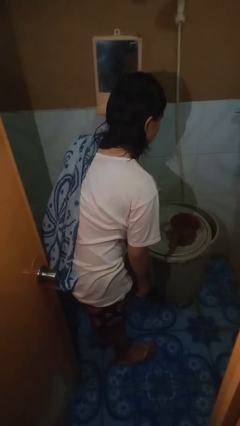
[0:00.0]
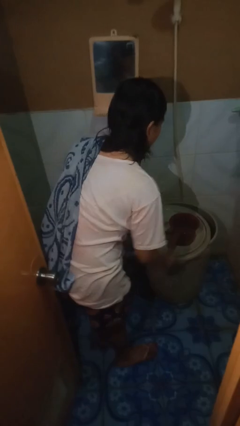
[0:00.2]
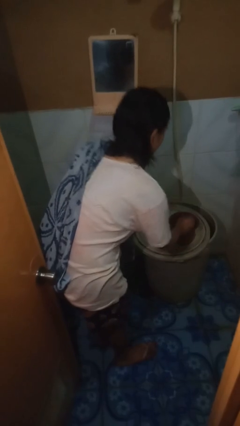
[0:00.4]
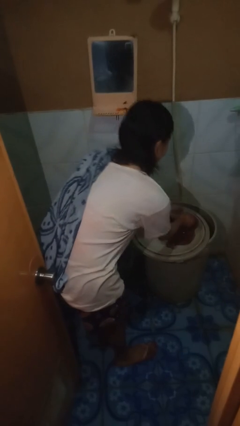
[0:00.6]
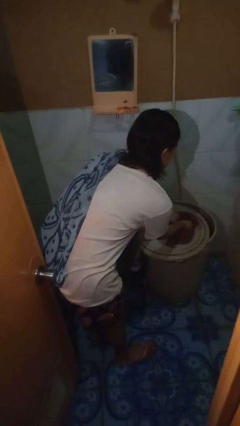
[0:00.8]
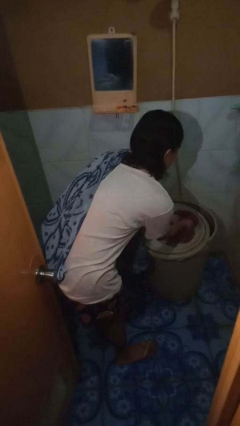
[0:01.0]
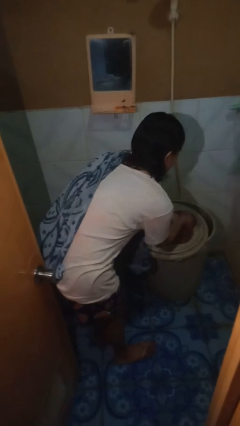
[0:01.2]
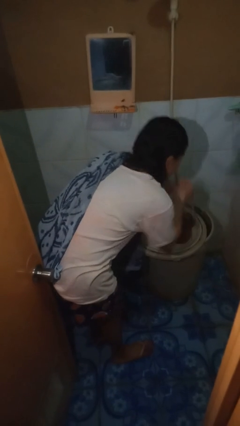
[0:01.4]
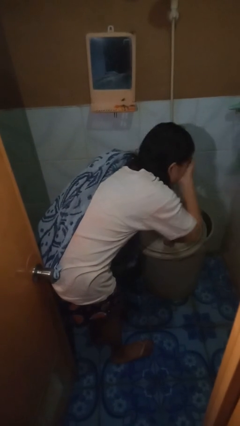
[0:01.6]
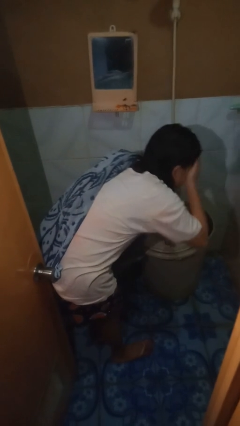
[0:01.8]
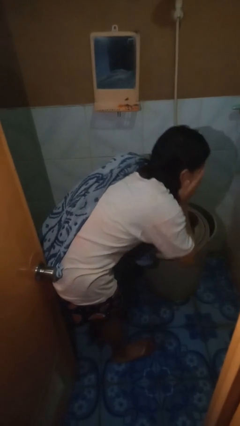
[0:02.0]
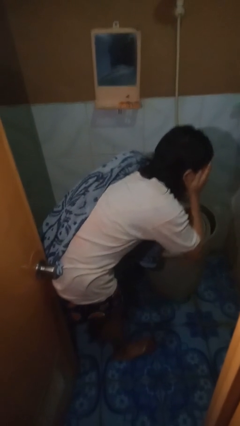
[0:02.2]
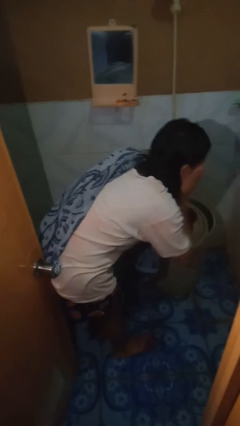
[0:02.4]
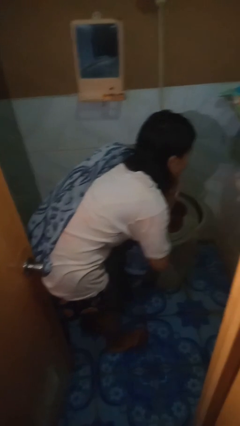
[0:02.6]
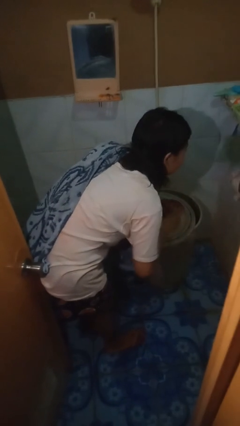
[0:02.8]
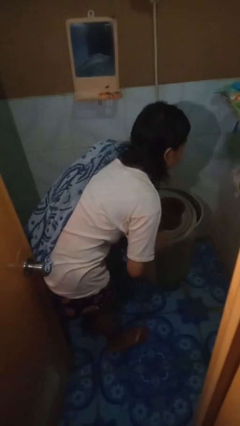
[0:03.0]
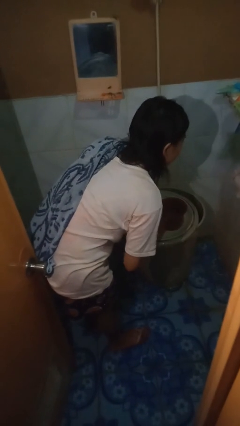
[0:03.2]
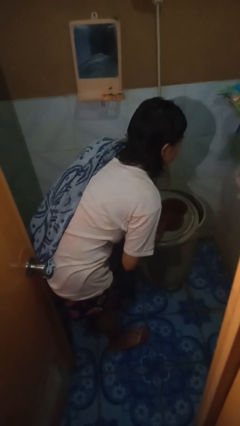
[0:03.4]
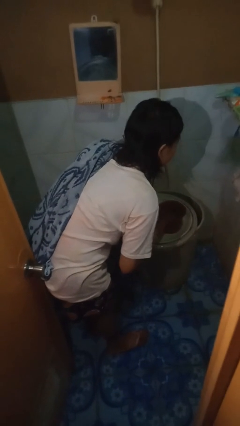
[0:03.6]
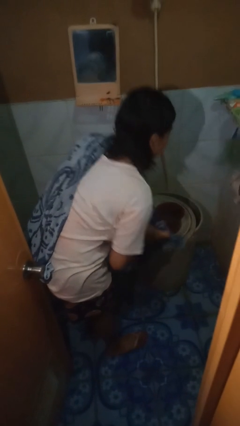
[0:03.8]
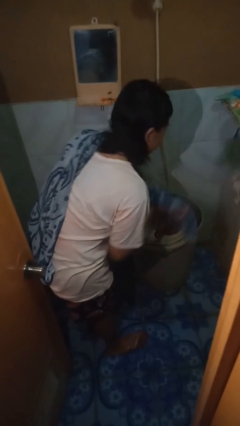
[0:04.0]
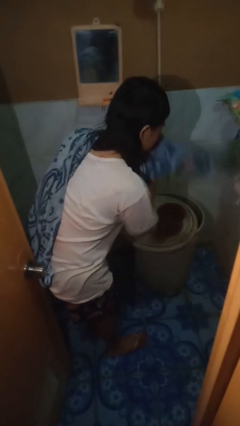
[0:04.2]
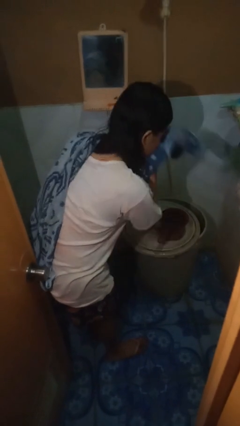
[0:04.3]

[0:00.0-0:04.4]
person washes face

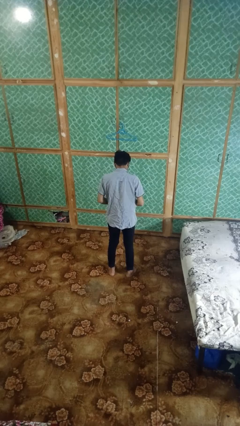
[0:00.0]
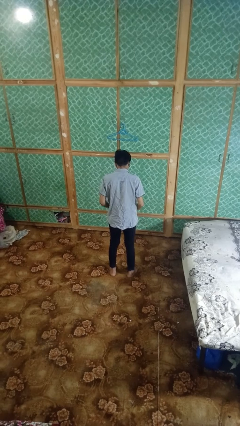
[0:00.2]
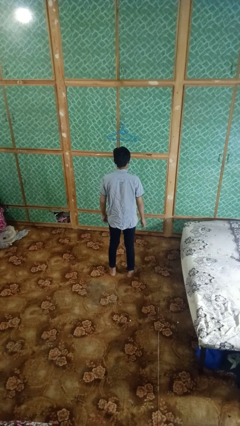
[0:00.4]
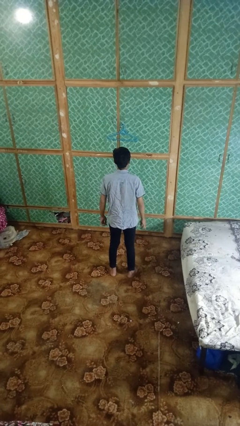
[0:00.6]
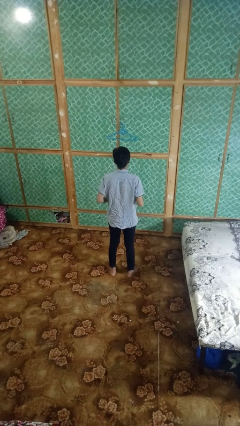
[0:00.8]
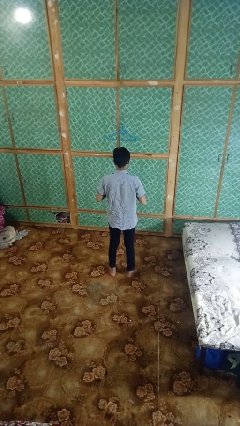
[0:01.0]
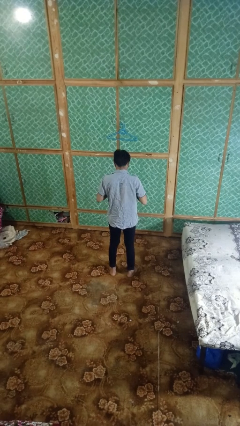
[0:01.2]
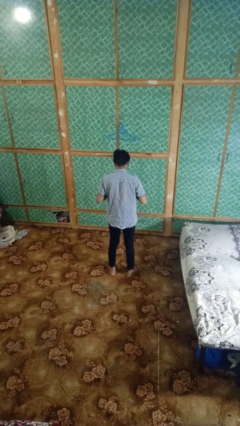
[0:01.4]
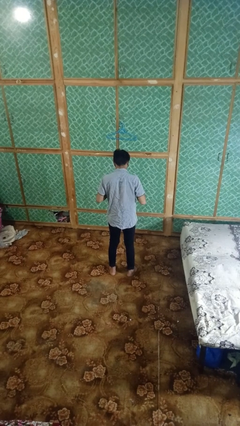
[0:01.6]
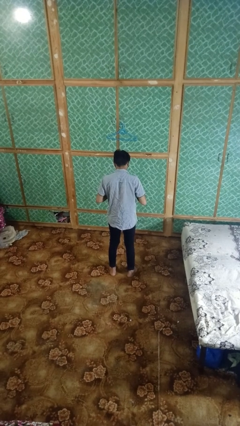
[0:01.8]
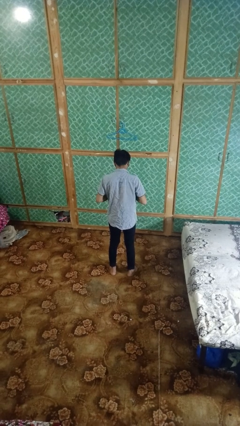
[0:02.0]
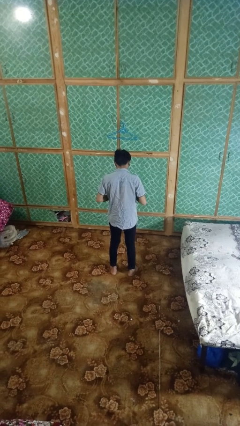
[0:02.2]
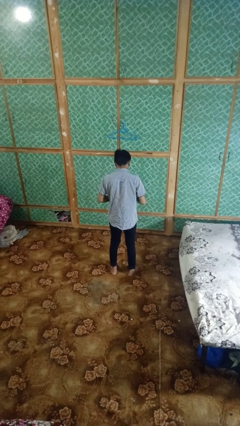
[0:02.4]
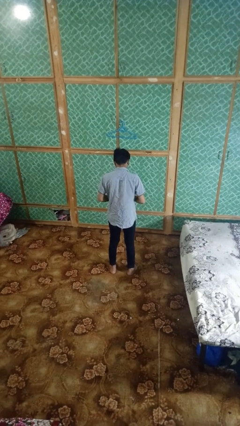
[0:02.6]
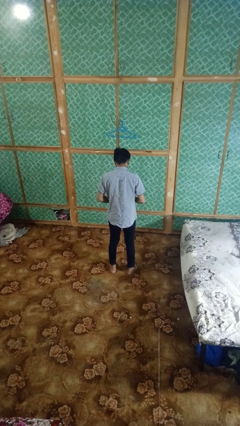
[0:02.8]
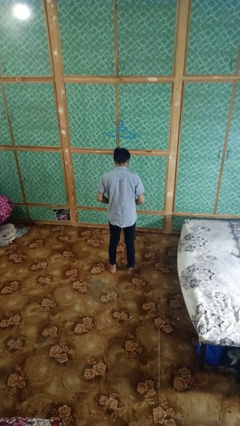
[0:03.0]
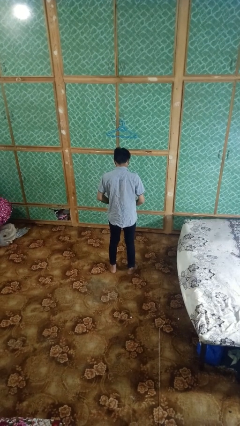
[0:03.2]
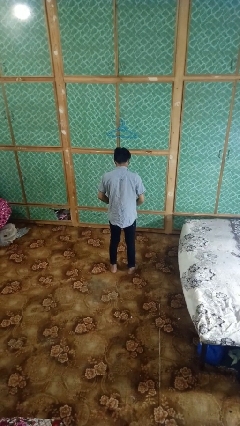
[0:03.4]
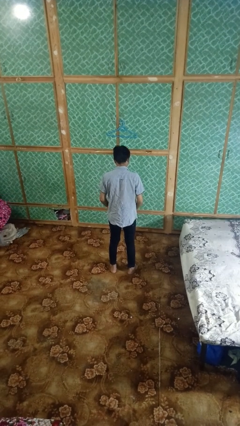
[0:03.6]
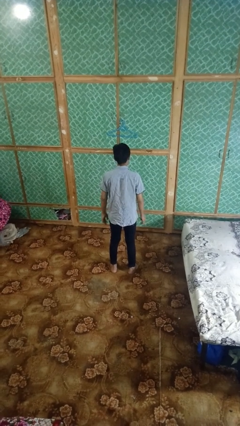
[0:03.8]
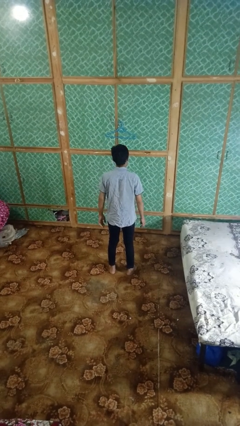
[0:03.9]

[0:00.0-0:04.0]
person buttons shirt

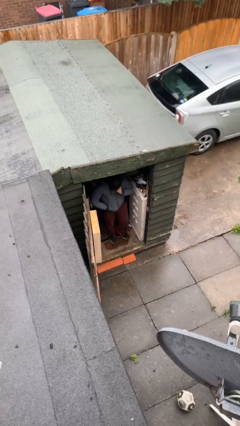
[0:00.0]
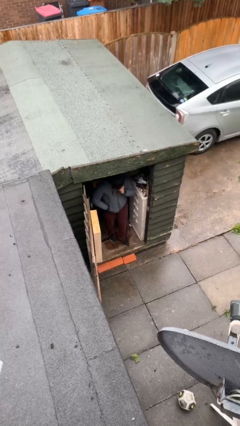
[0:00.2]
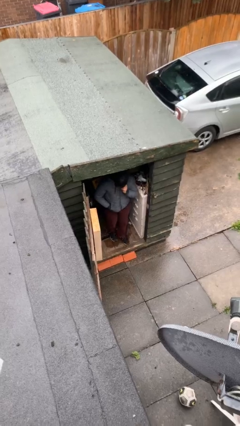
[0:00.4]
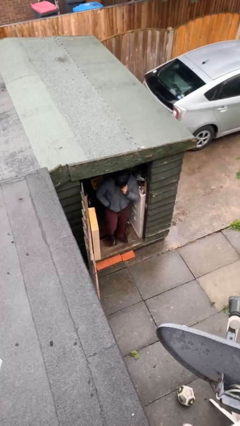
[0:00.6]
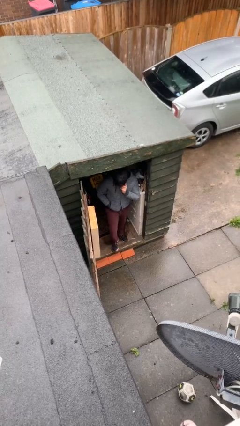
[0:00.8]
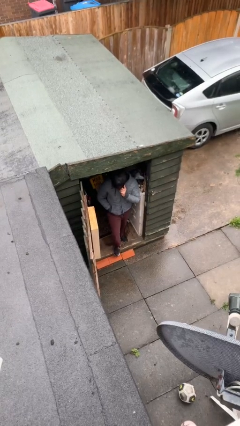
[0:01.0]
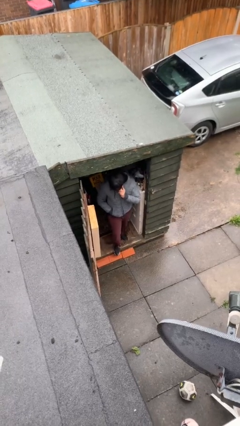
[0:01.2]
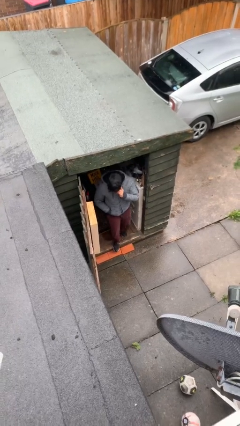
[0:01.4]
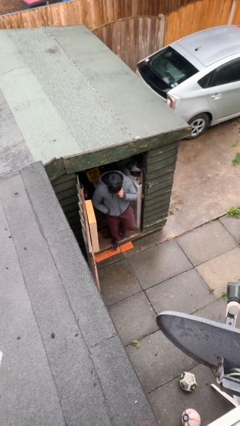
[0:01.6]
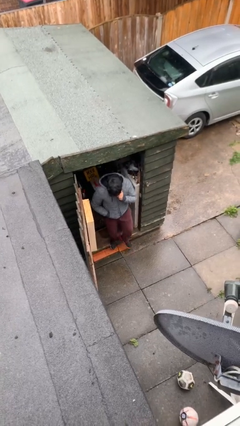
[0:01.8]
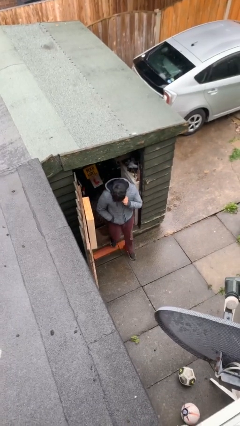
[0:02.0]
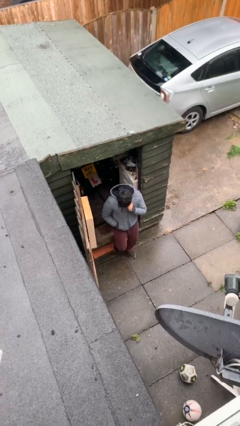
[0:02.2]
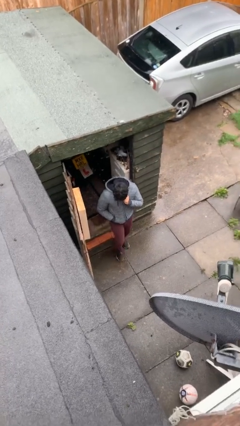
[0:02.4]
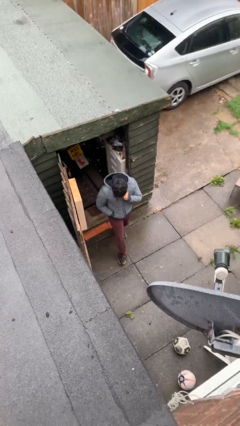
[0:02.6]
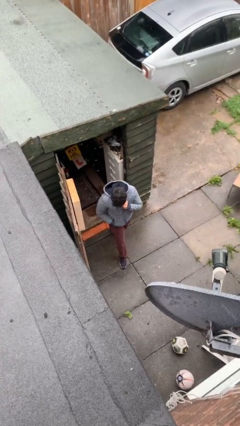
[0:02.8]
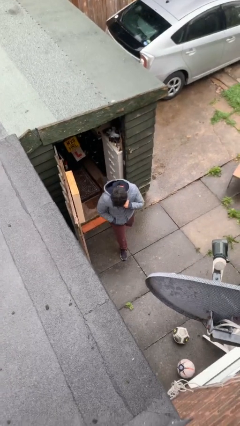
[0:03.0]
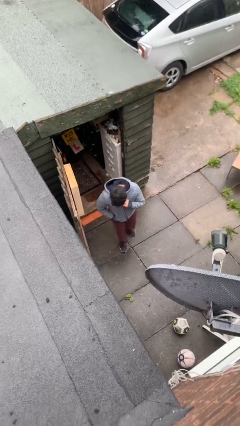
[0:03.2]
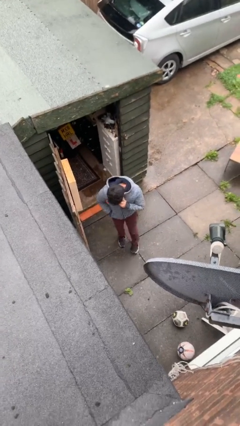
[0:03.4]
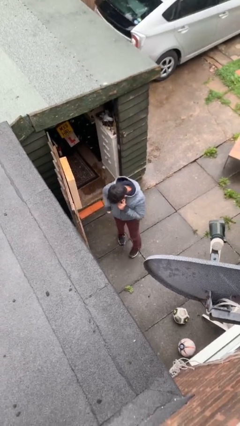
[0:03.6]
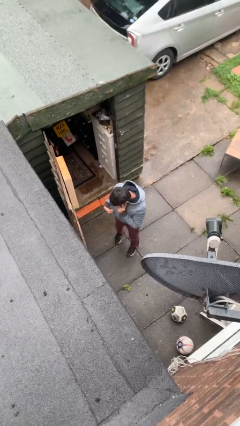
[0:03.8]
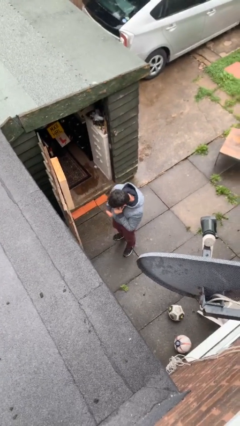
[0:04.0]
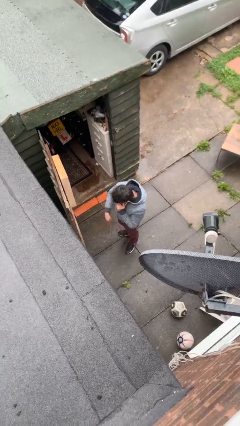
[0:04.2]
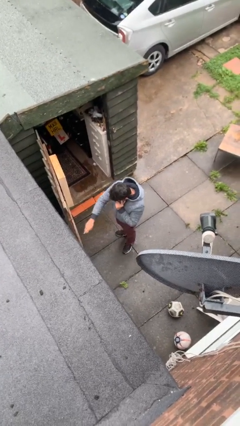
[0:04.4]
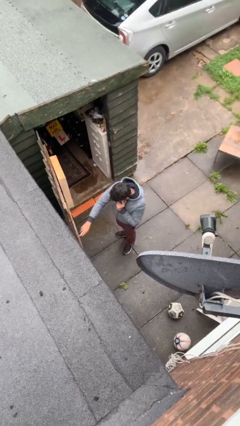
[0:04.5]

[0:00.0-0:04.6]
person enters scene through structure

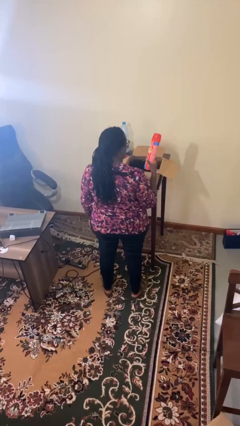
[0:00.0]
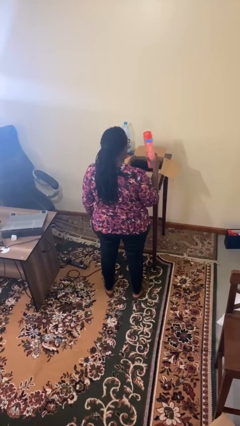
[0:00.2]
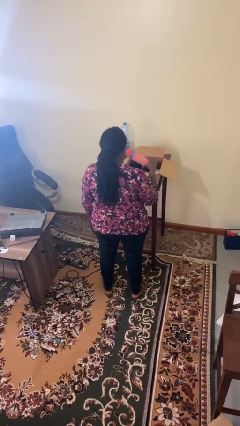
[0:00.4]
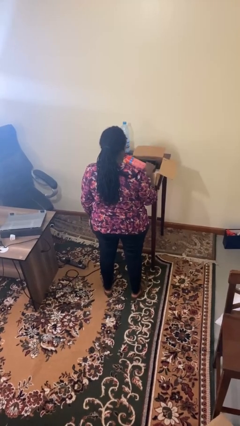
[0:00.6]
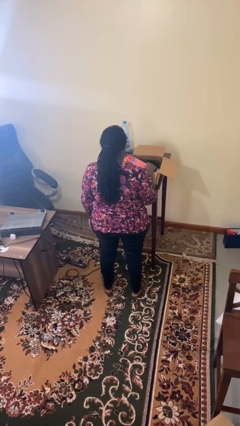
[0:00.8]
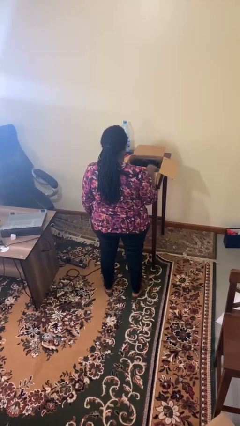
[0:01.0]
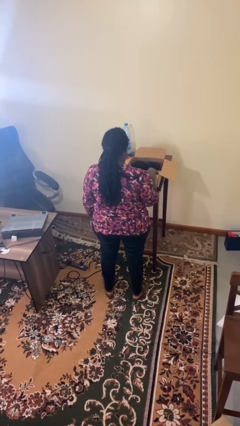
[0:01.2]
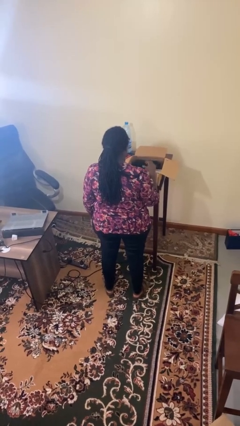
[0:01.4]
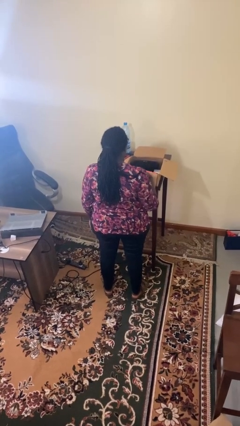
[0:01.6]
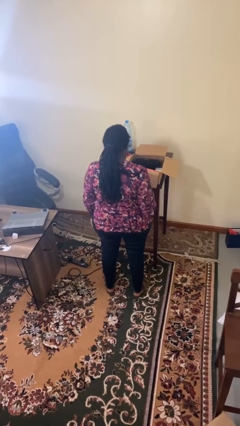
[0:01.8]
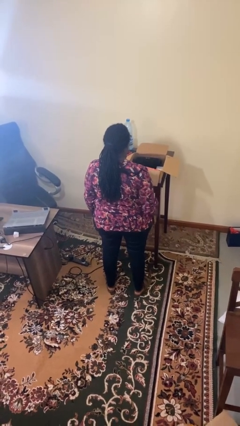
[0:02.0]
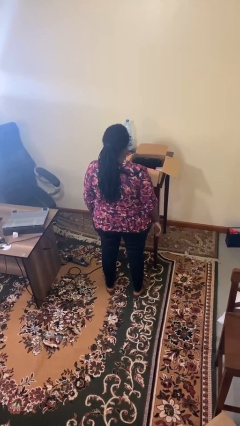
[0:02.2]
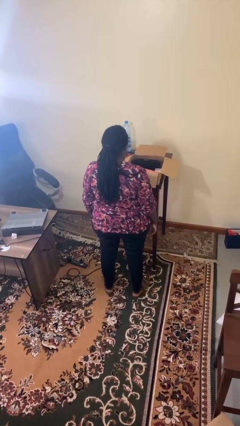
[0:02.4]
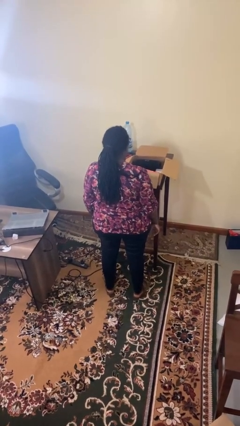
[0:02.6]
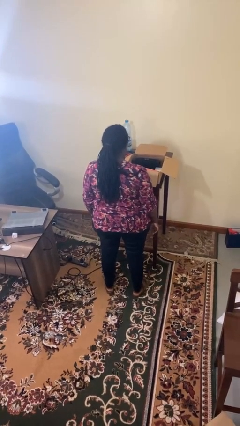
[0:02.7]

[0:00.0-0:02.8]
person puts object into box

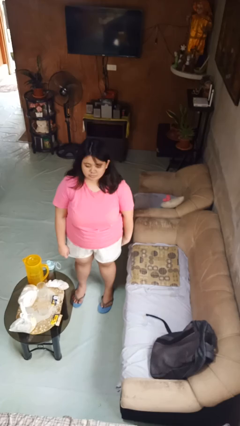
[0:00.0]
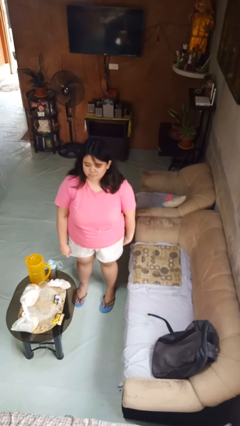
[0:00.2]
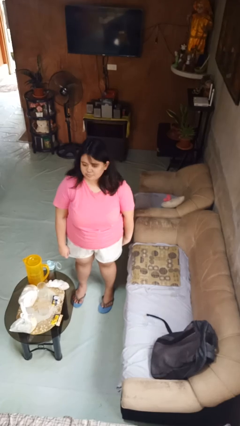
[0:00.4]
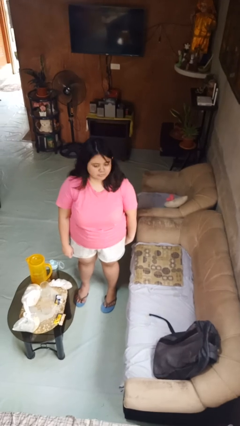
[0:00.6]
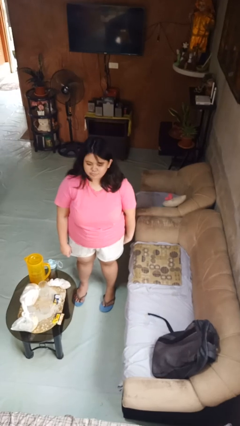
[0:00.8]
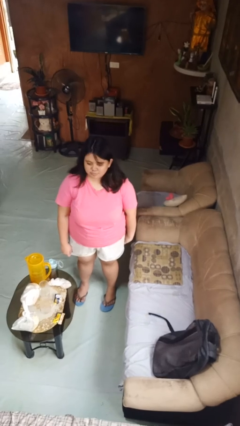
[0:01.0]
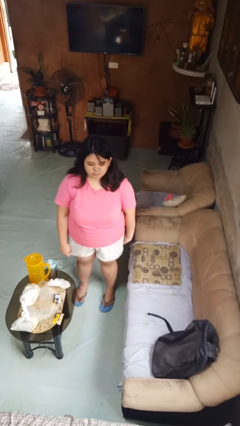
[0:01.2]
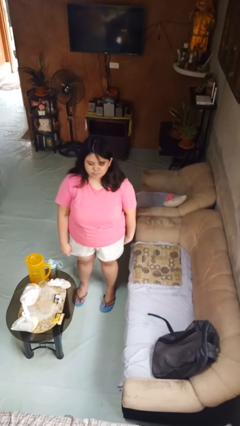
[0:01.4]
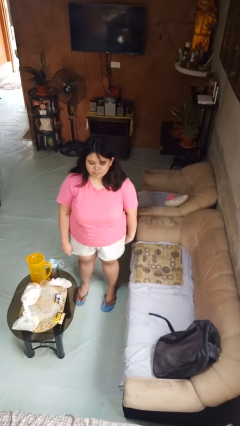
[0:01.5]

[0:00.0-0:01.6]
person shakes head
